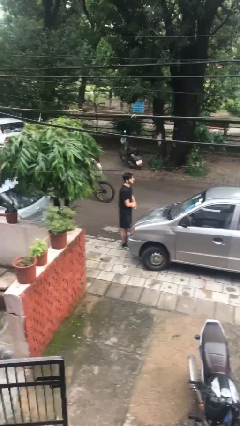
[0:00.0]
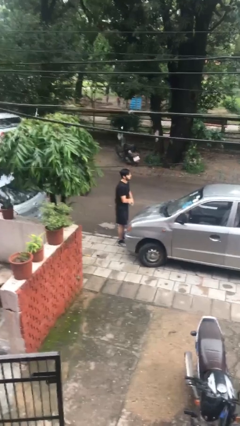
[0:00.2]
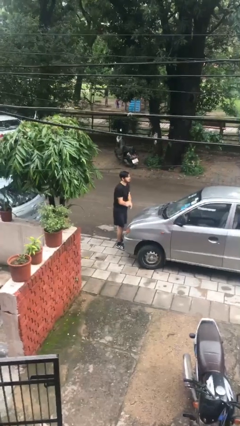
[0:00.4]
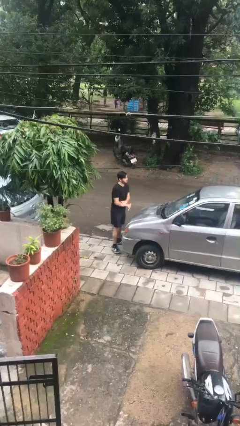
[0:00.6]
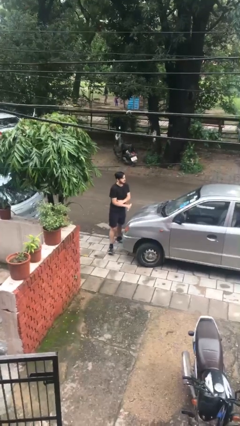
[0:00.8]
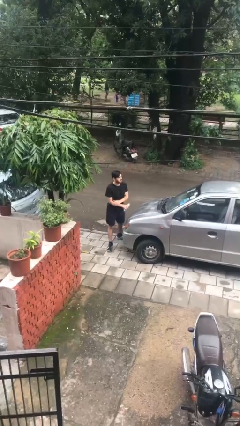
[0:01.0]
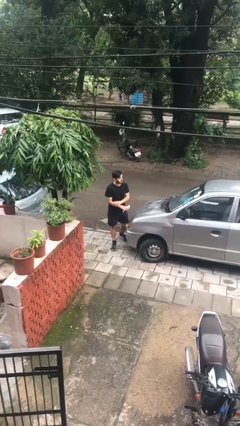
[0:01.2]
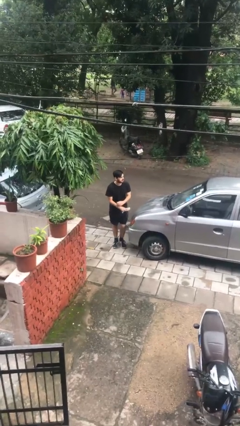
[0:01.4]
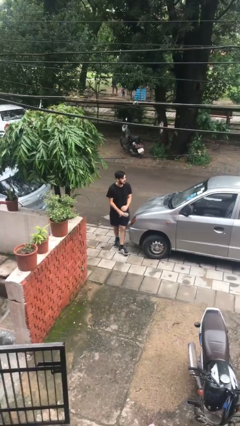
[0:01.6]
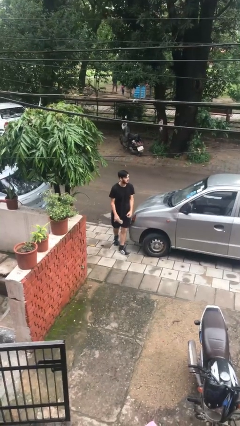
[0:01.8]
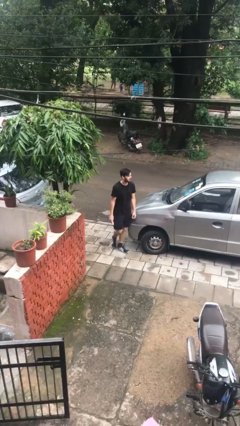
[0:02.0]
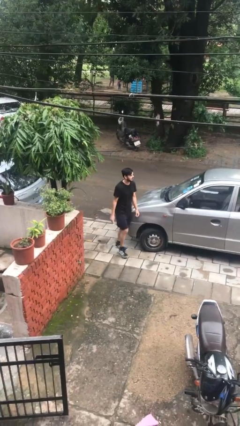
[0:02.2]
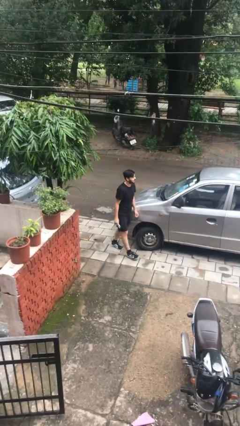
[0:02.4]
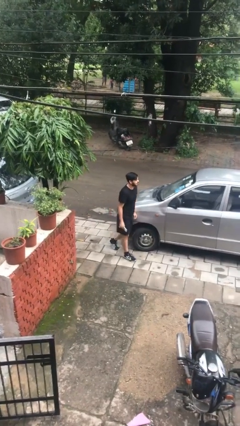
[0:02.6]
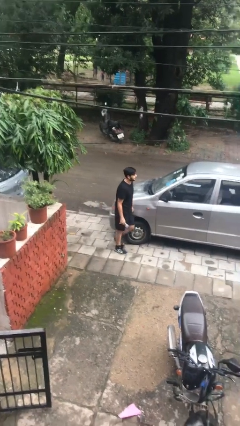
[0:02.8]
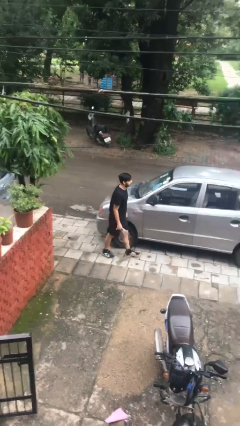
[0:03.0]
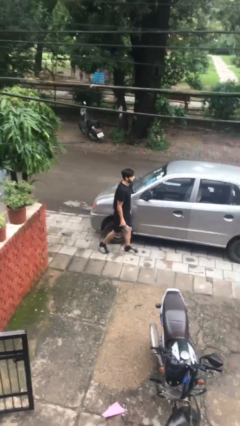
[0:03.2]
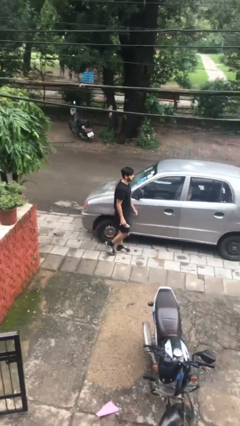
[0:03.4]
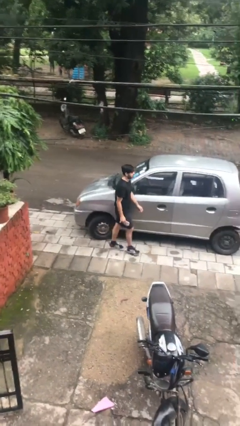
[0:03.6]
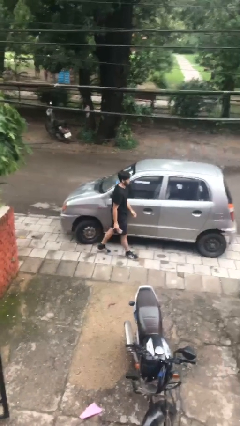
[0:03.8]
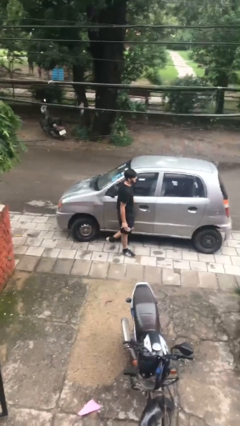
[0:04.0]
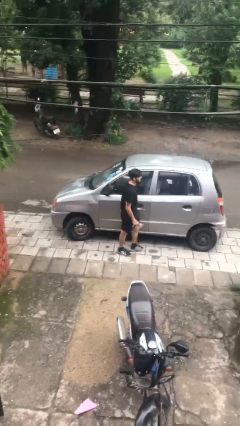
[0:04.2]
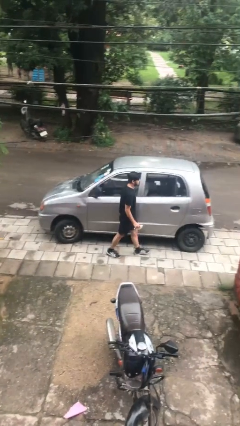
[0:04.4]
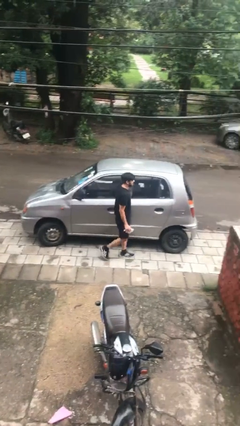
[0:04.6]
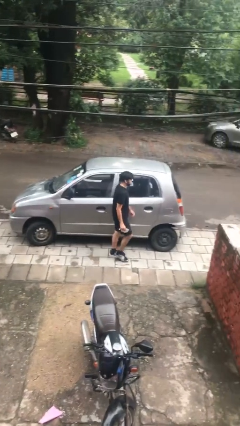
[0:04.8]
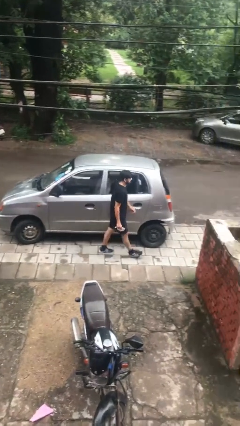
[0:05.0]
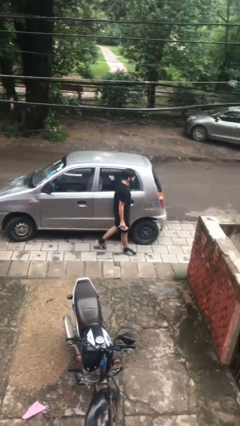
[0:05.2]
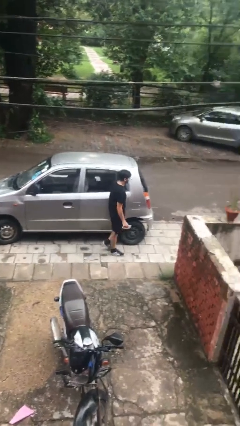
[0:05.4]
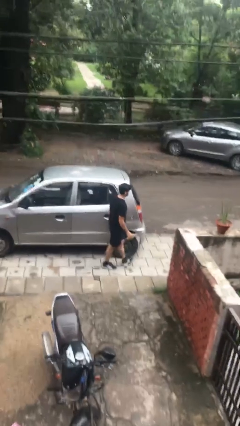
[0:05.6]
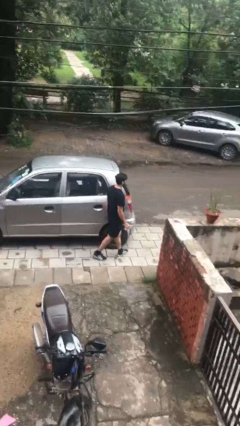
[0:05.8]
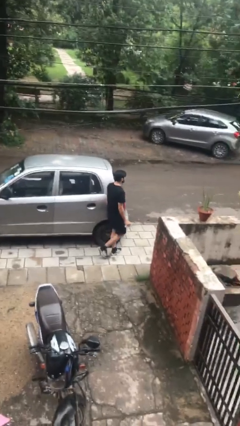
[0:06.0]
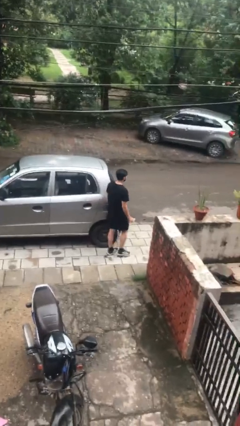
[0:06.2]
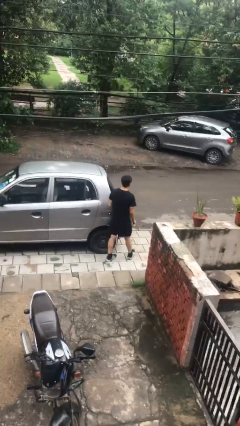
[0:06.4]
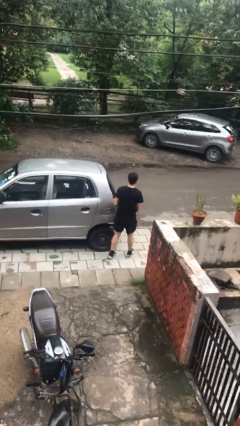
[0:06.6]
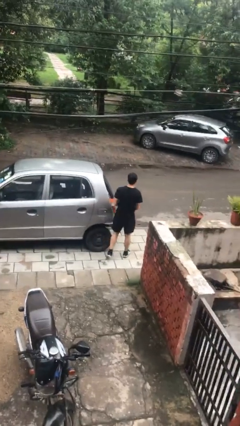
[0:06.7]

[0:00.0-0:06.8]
person walks around car

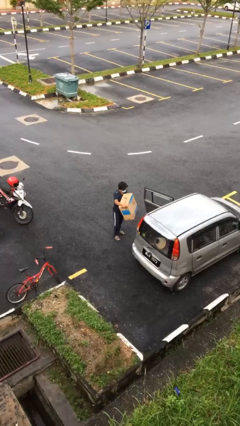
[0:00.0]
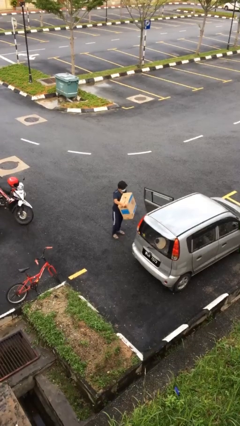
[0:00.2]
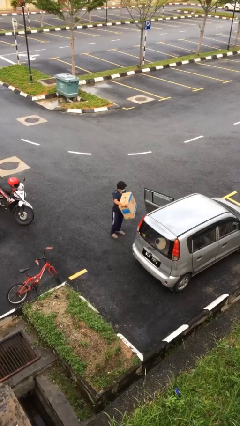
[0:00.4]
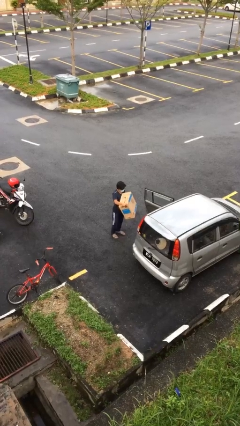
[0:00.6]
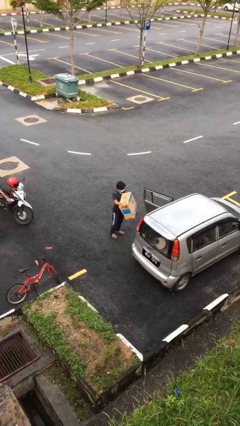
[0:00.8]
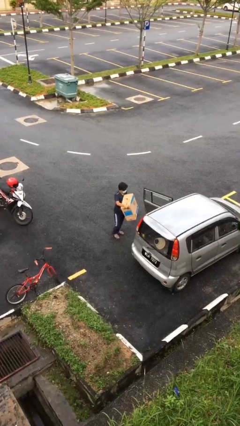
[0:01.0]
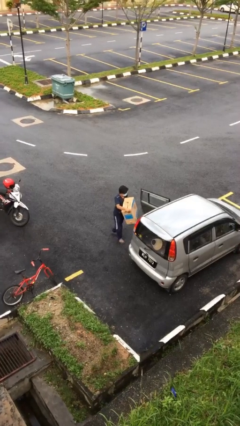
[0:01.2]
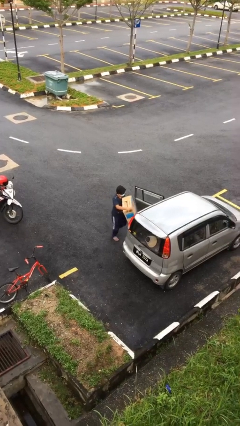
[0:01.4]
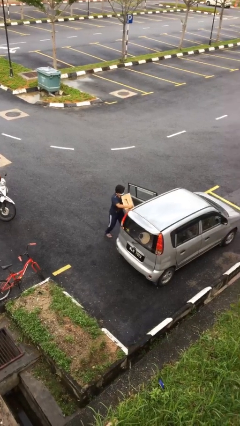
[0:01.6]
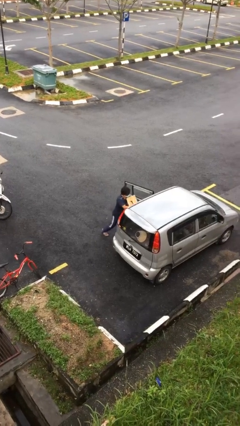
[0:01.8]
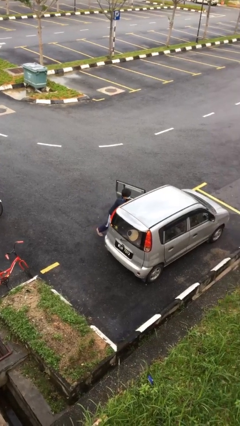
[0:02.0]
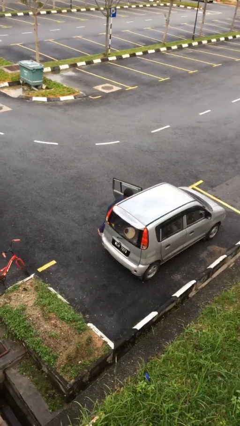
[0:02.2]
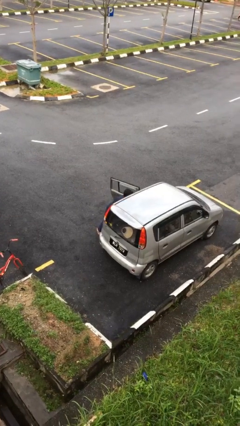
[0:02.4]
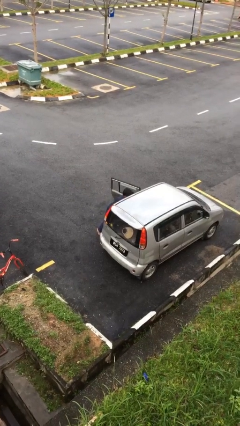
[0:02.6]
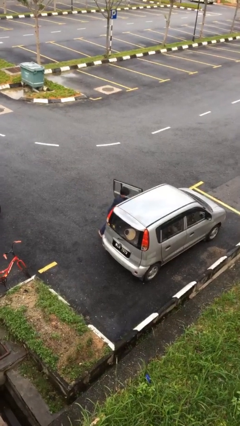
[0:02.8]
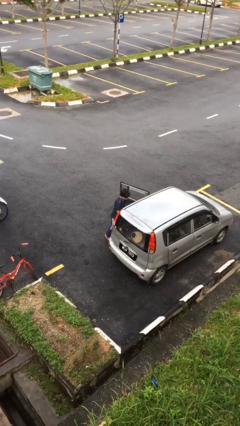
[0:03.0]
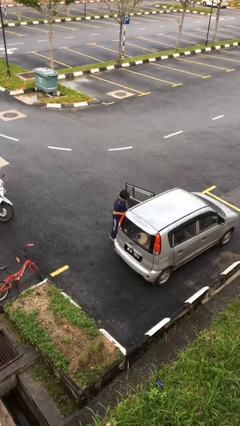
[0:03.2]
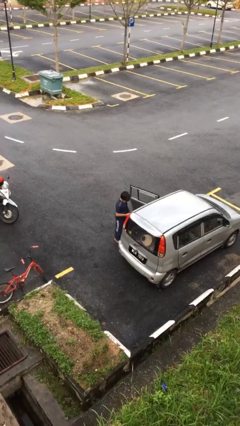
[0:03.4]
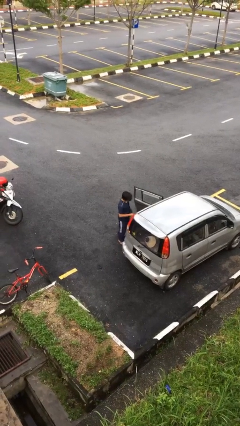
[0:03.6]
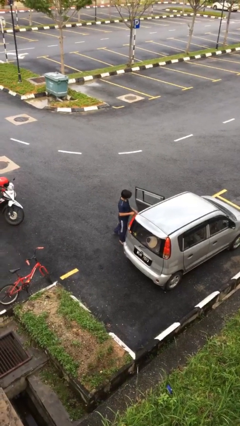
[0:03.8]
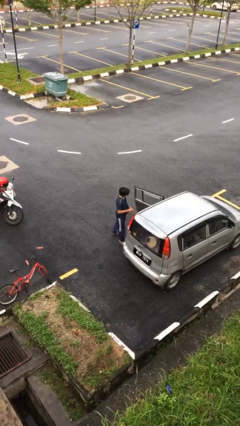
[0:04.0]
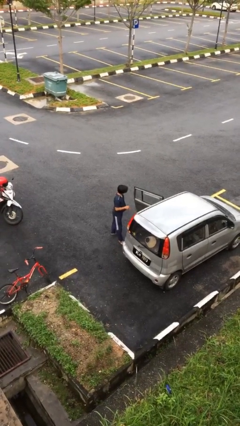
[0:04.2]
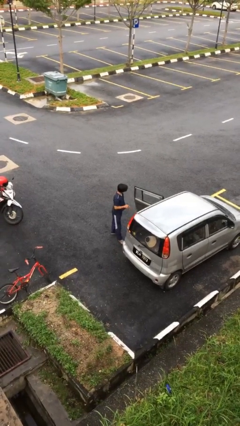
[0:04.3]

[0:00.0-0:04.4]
person loads car

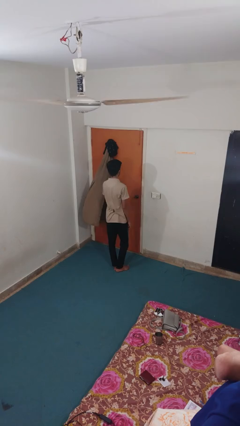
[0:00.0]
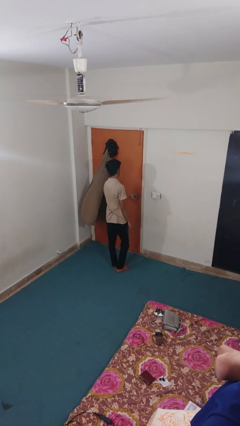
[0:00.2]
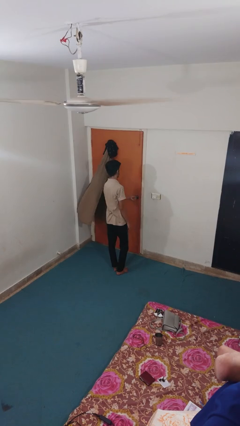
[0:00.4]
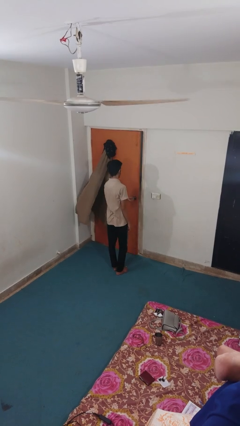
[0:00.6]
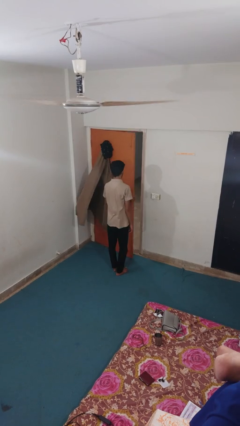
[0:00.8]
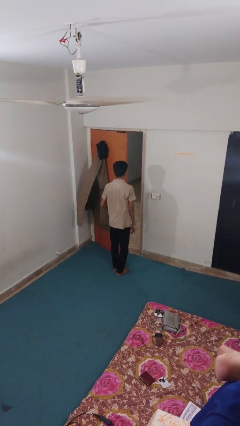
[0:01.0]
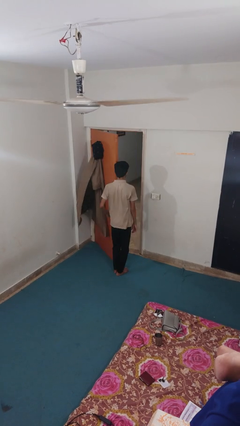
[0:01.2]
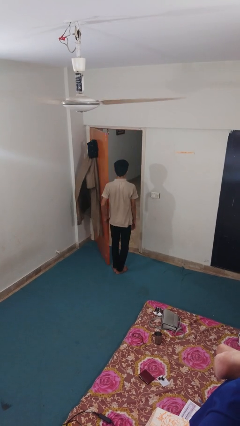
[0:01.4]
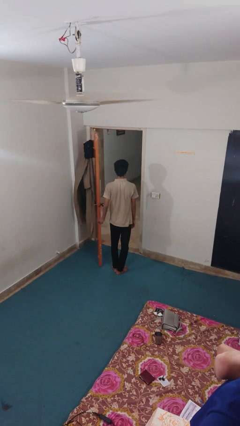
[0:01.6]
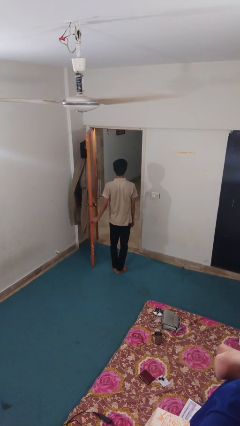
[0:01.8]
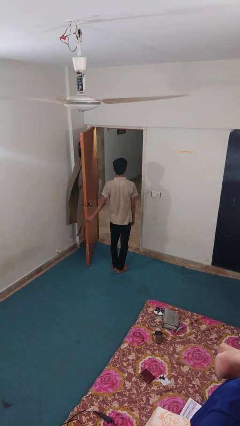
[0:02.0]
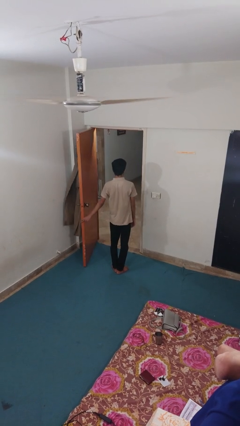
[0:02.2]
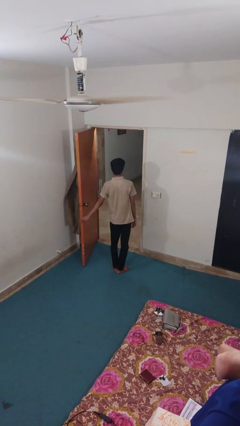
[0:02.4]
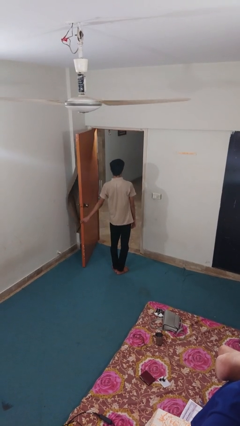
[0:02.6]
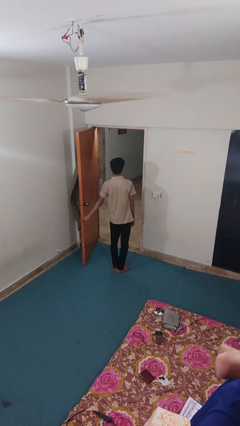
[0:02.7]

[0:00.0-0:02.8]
person opens facility door

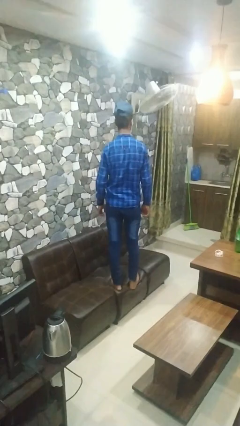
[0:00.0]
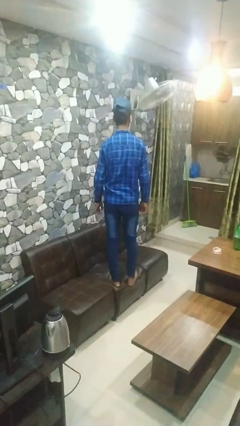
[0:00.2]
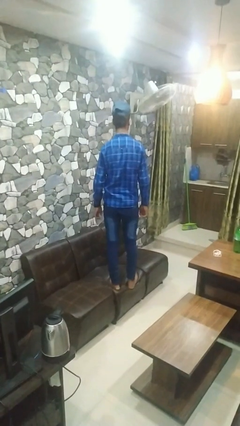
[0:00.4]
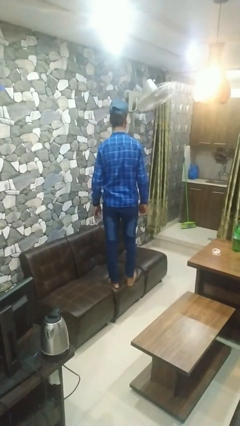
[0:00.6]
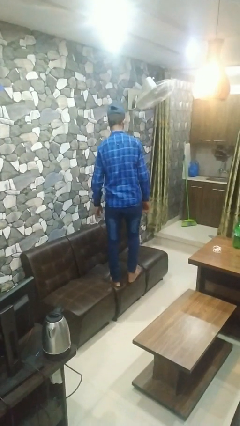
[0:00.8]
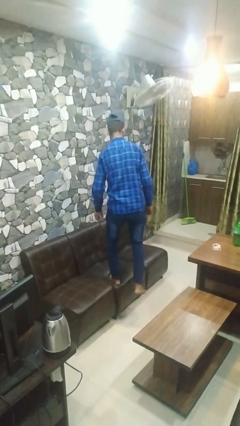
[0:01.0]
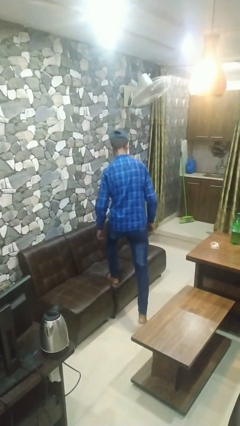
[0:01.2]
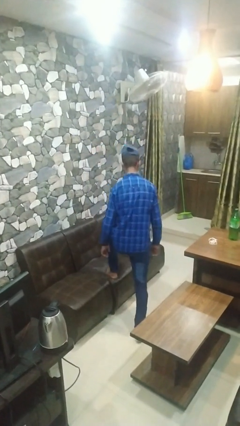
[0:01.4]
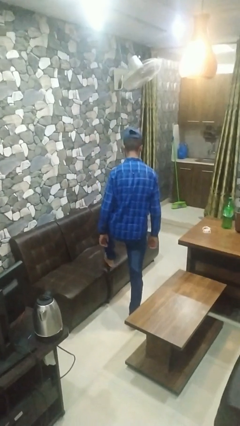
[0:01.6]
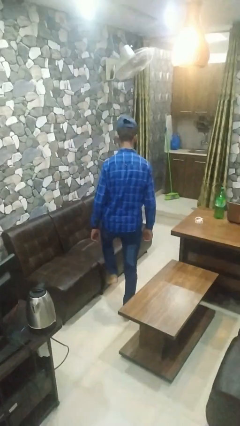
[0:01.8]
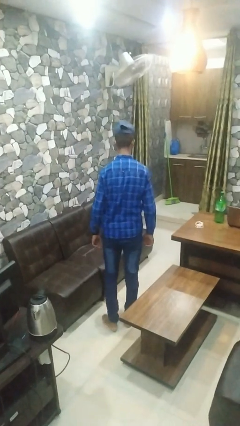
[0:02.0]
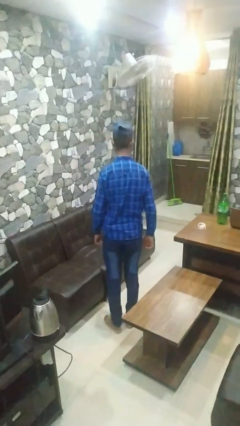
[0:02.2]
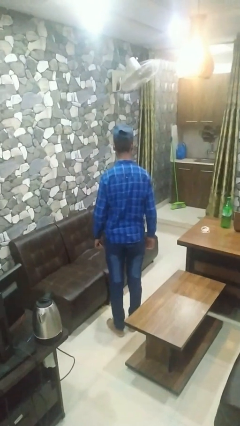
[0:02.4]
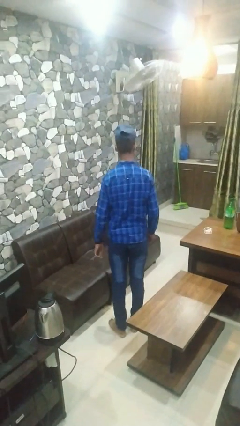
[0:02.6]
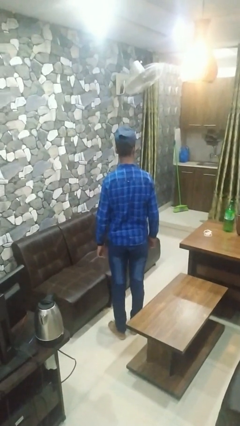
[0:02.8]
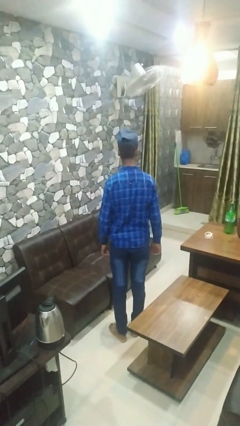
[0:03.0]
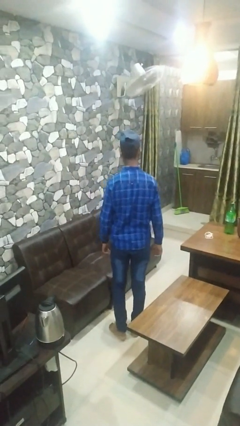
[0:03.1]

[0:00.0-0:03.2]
person climbs off couch
